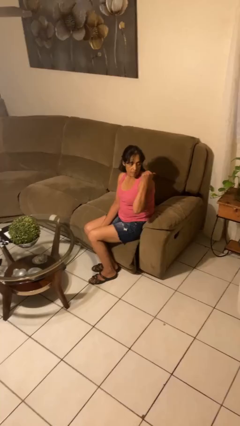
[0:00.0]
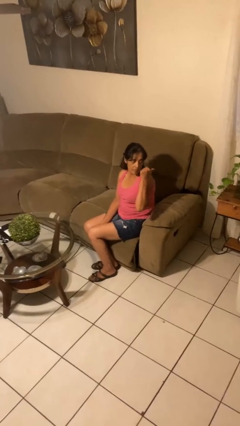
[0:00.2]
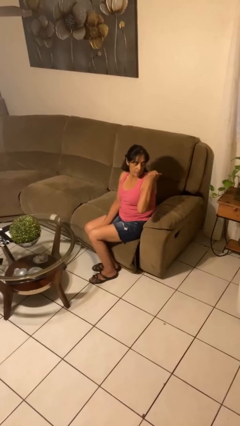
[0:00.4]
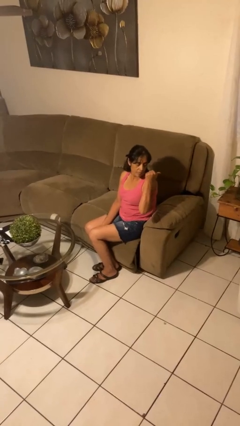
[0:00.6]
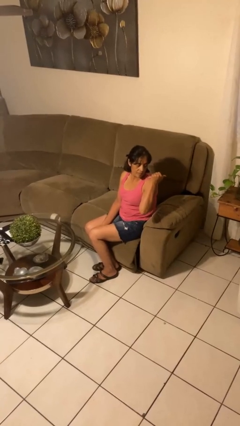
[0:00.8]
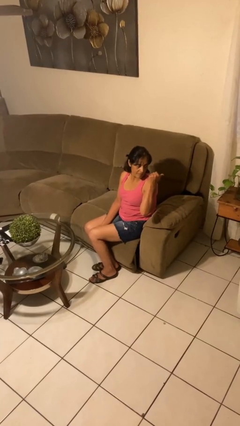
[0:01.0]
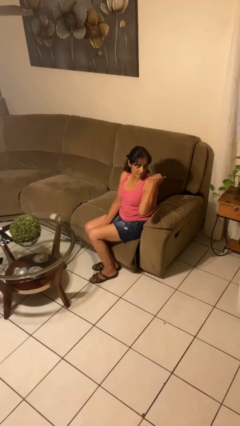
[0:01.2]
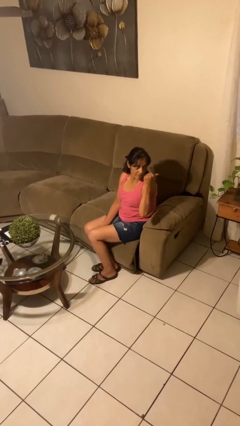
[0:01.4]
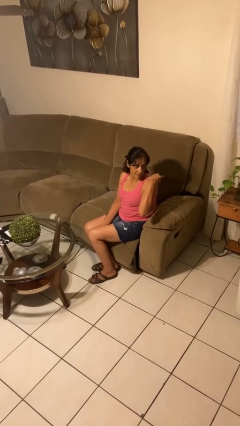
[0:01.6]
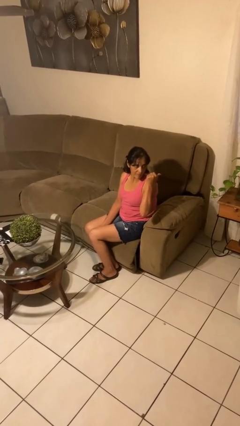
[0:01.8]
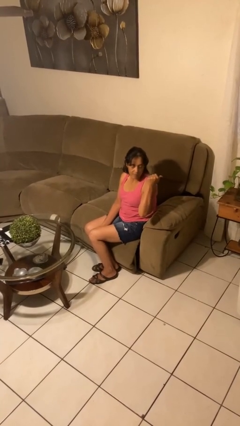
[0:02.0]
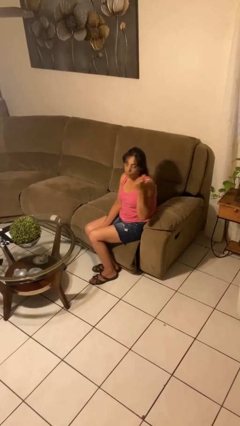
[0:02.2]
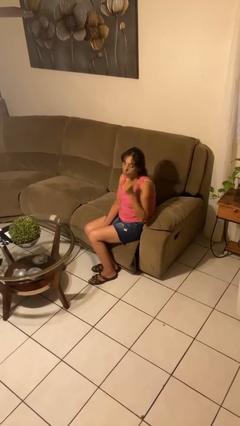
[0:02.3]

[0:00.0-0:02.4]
person gestures behind me

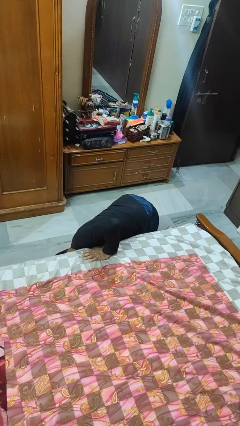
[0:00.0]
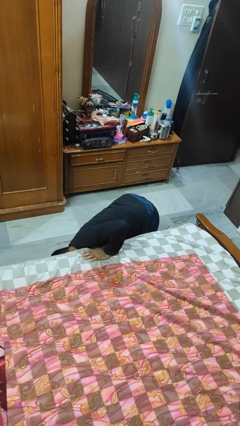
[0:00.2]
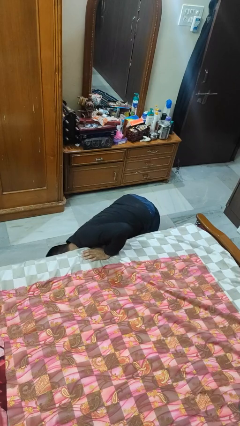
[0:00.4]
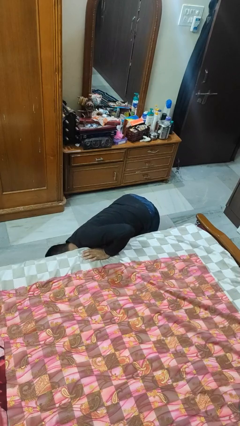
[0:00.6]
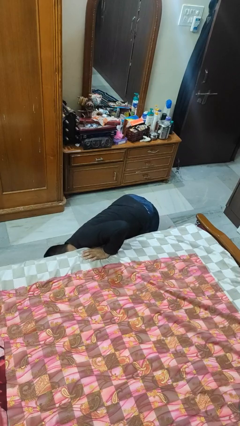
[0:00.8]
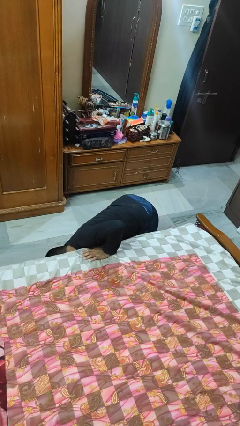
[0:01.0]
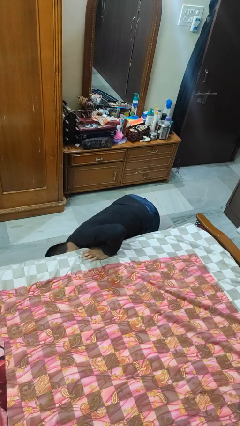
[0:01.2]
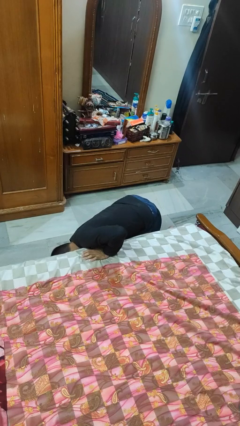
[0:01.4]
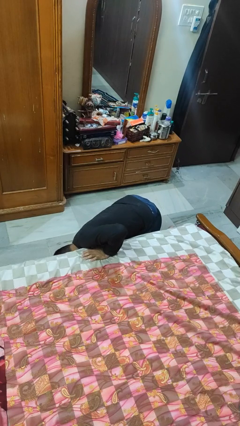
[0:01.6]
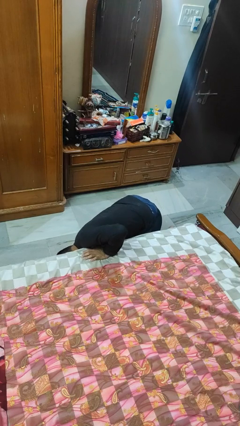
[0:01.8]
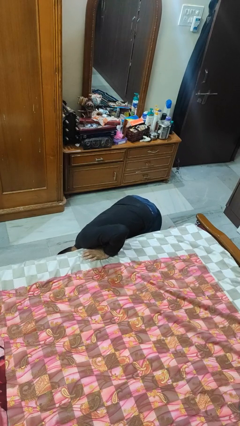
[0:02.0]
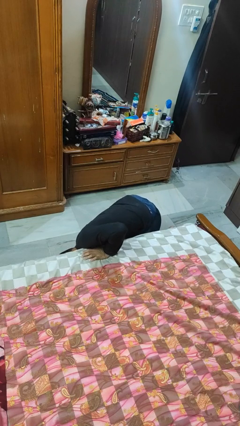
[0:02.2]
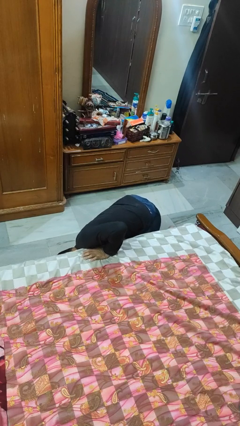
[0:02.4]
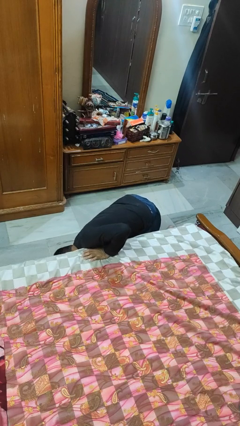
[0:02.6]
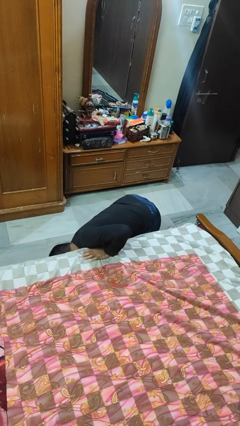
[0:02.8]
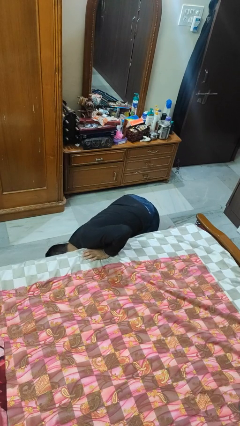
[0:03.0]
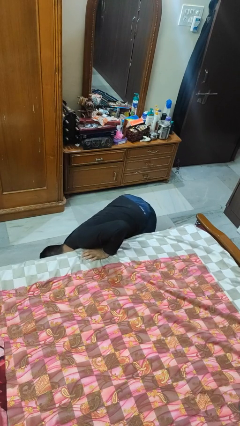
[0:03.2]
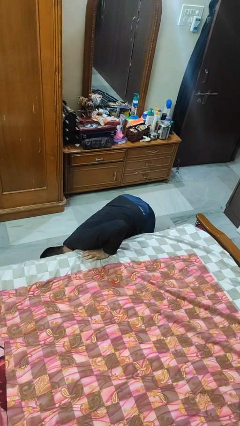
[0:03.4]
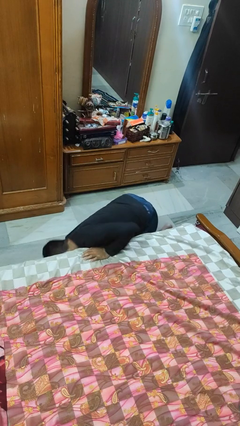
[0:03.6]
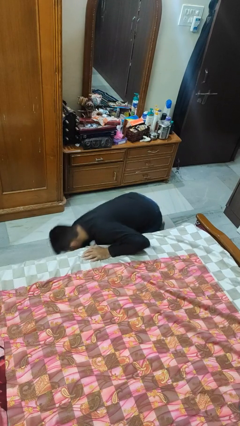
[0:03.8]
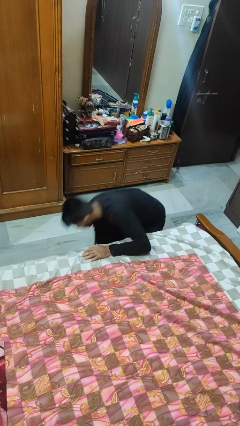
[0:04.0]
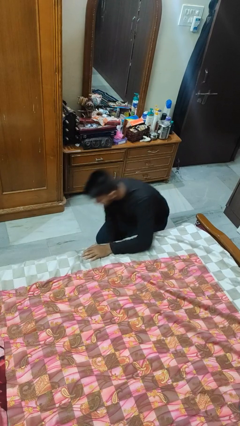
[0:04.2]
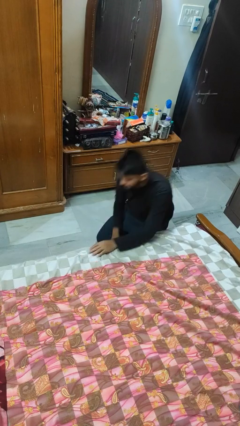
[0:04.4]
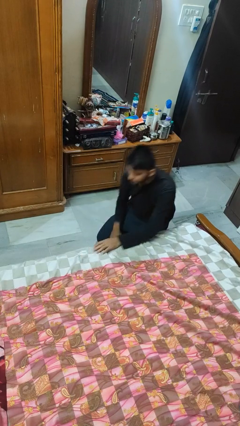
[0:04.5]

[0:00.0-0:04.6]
person searches under bed

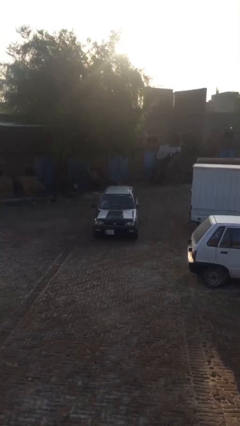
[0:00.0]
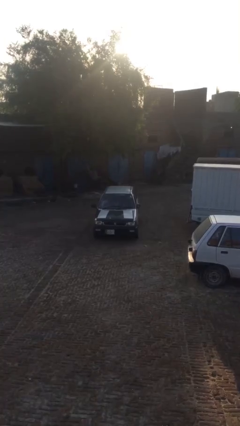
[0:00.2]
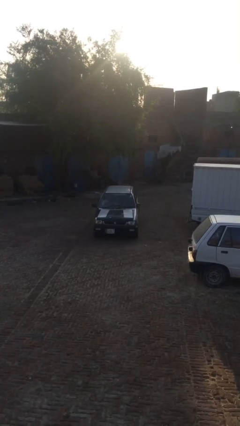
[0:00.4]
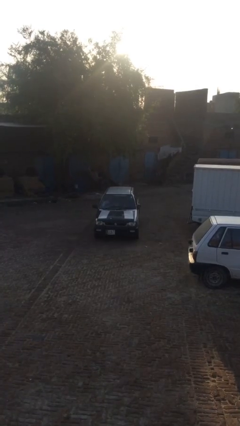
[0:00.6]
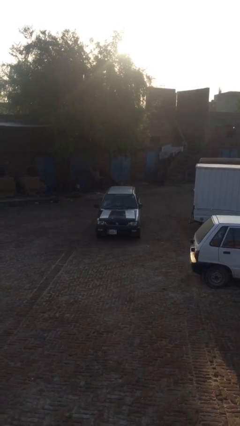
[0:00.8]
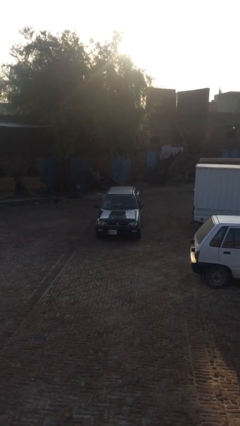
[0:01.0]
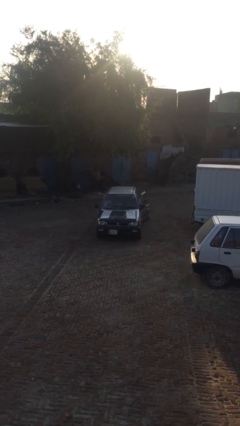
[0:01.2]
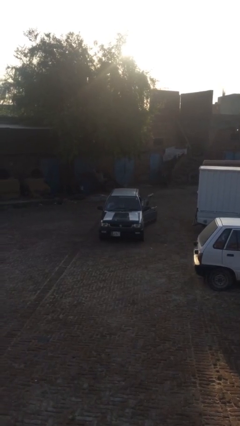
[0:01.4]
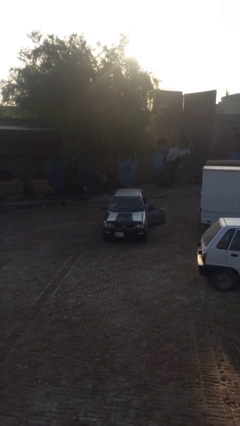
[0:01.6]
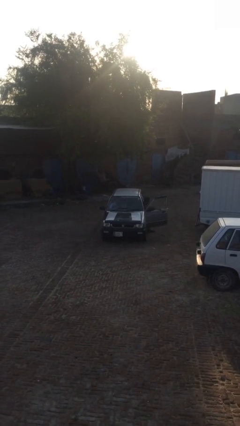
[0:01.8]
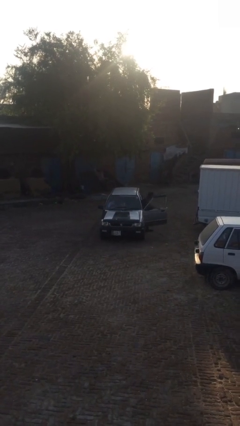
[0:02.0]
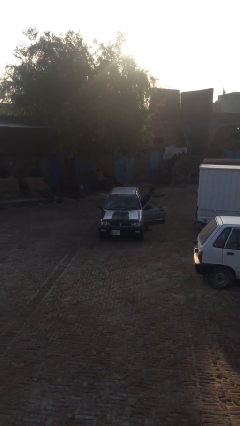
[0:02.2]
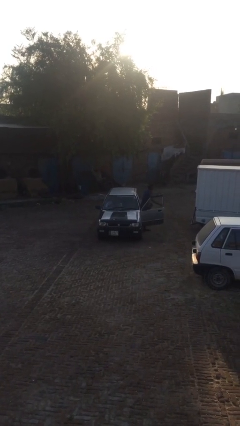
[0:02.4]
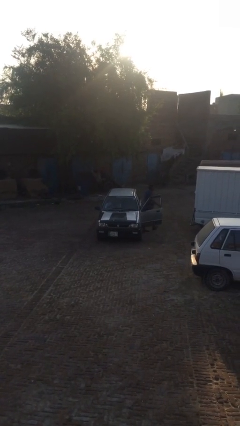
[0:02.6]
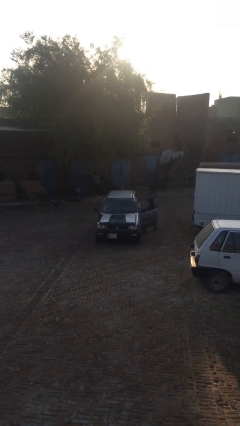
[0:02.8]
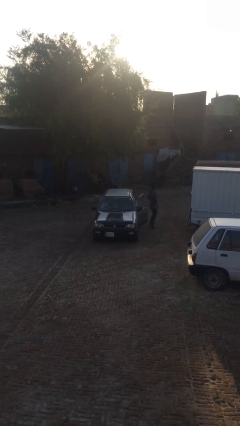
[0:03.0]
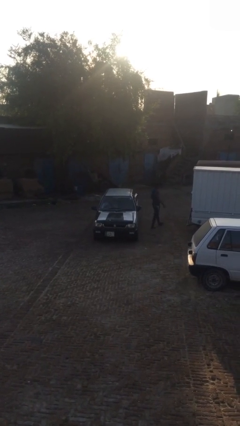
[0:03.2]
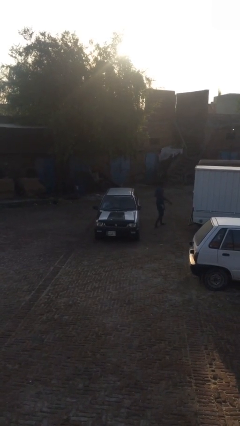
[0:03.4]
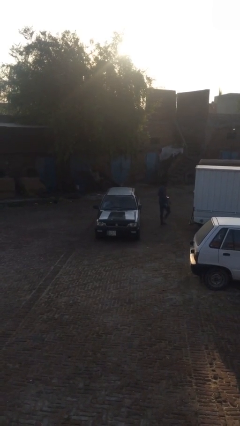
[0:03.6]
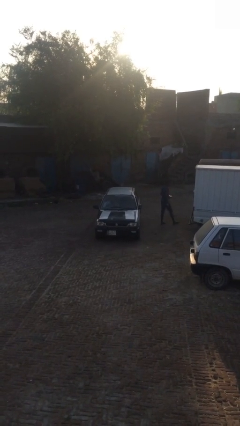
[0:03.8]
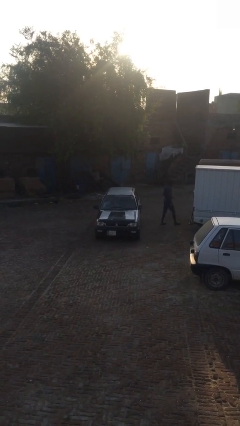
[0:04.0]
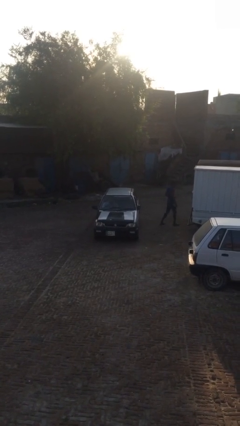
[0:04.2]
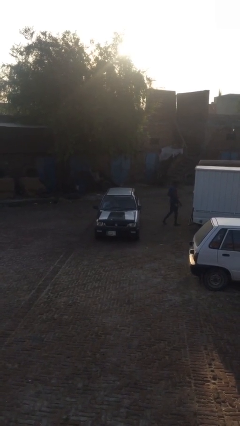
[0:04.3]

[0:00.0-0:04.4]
car drops off person

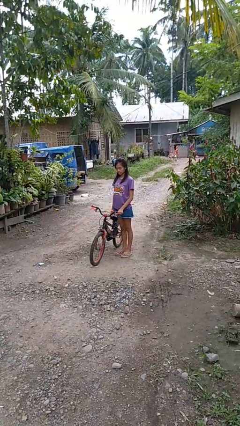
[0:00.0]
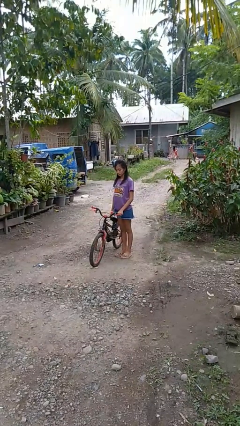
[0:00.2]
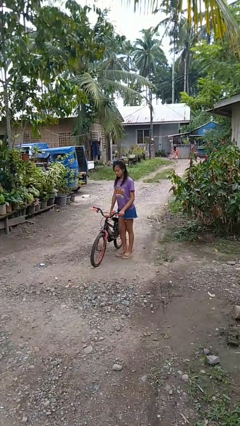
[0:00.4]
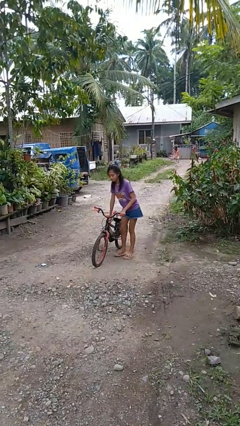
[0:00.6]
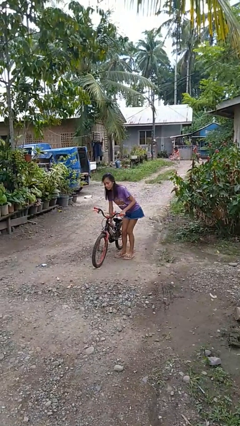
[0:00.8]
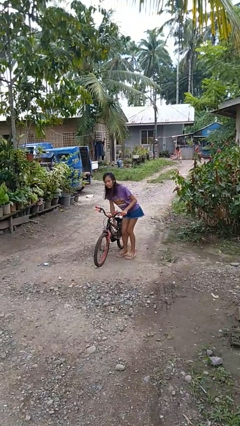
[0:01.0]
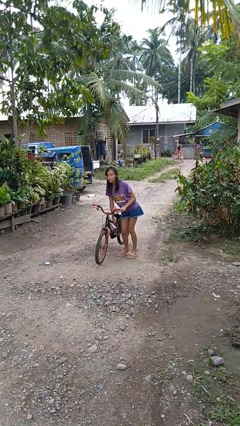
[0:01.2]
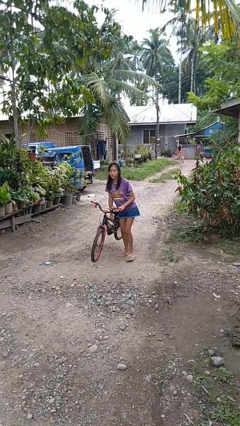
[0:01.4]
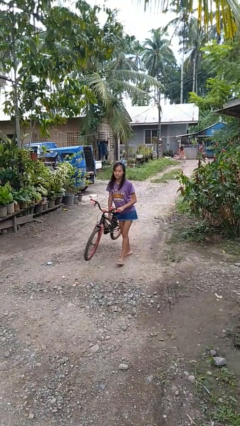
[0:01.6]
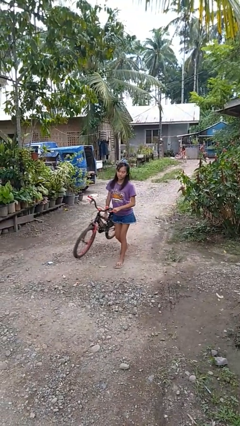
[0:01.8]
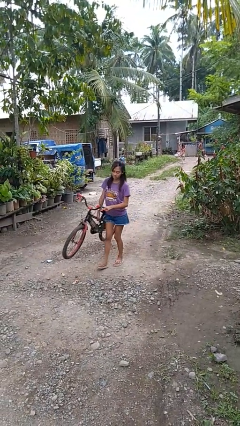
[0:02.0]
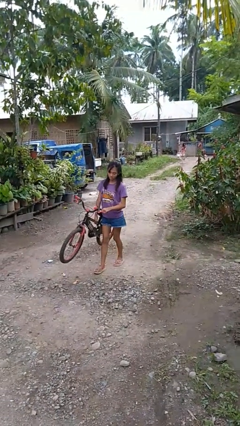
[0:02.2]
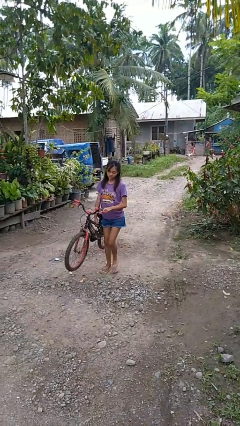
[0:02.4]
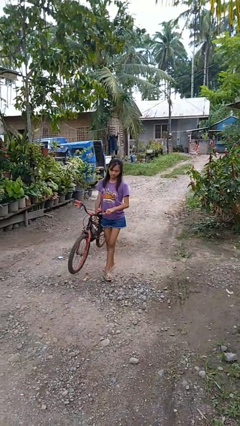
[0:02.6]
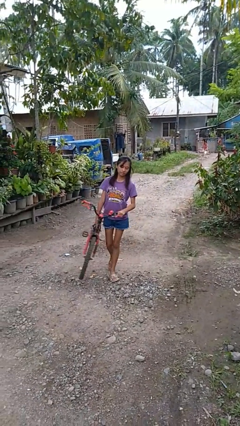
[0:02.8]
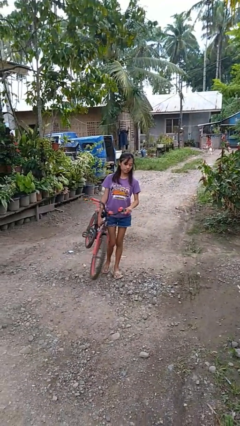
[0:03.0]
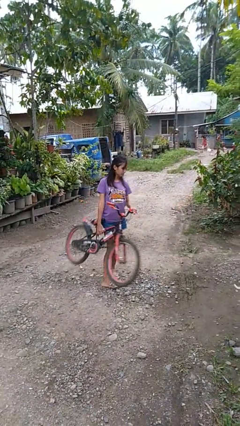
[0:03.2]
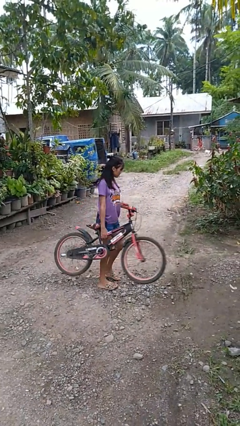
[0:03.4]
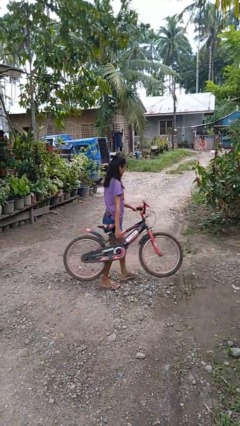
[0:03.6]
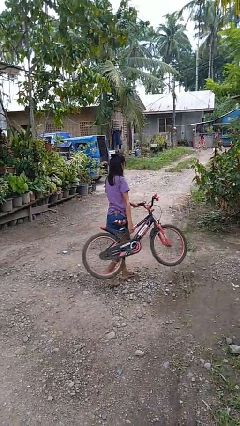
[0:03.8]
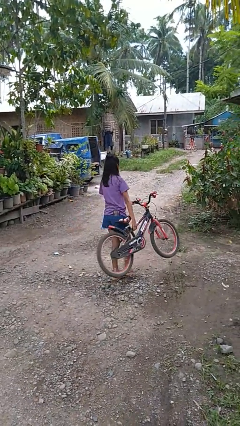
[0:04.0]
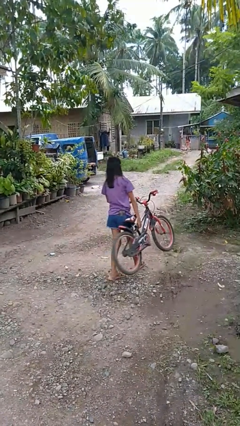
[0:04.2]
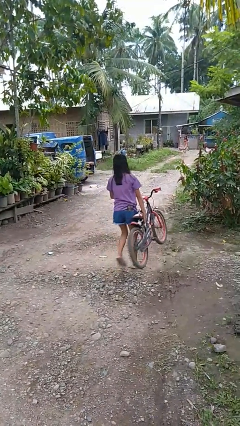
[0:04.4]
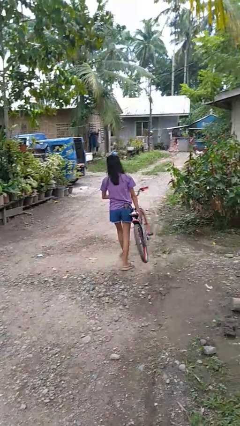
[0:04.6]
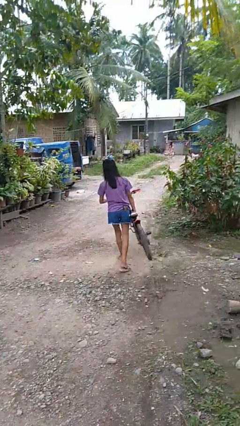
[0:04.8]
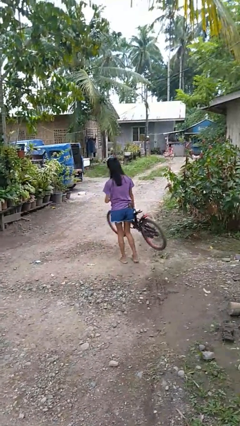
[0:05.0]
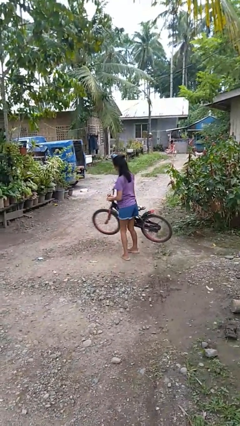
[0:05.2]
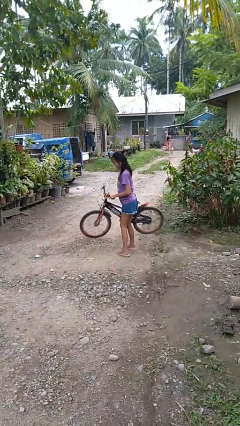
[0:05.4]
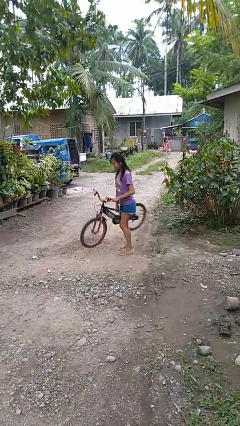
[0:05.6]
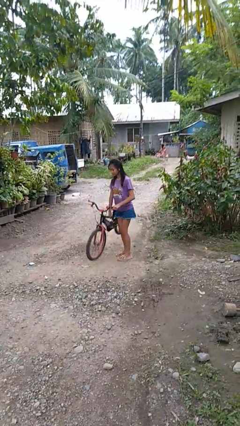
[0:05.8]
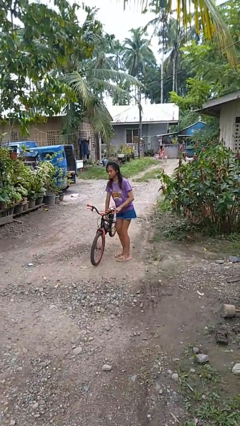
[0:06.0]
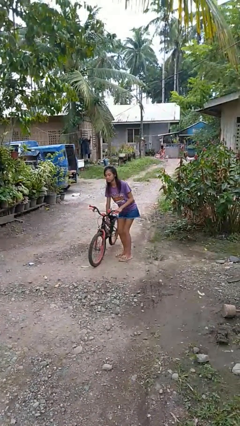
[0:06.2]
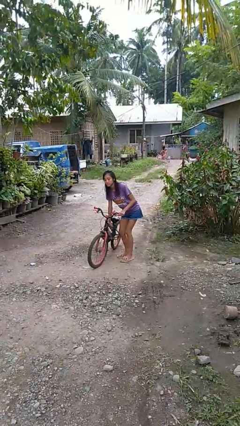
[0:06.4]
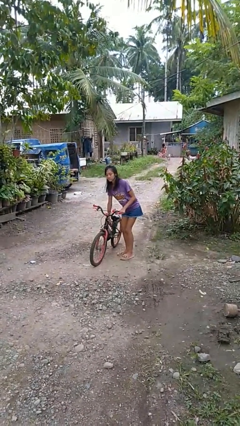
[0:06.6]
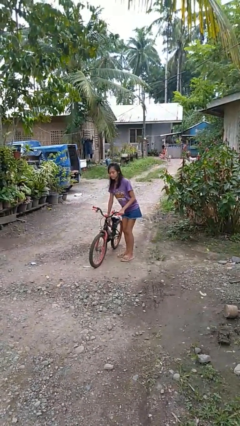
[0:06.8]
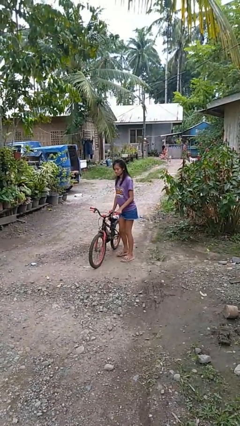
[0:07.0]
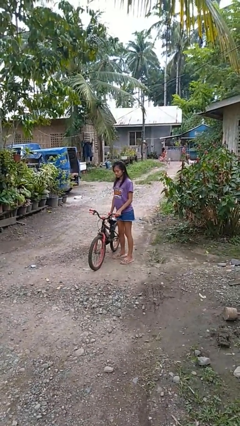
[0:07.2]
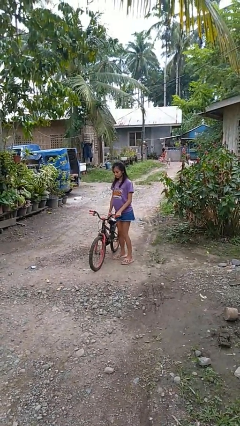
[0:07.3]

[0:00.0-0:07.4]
person carries bicycle
